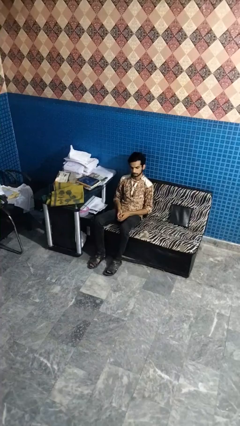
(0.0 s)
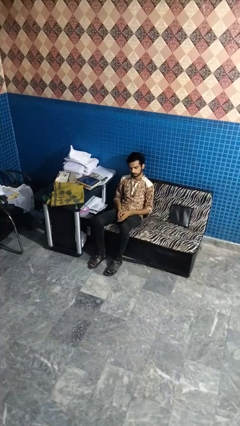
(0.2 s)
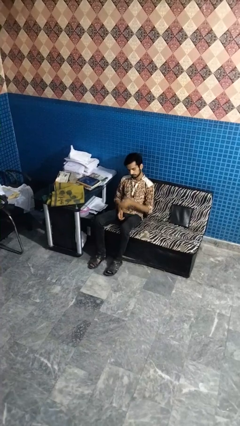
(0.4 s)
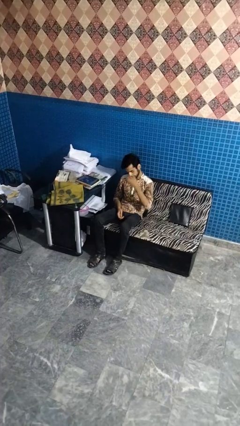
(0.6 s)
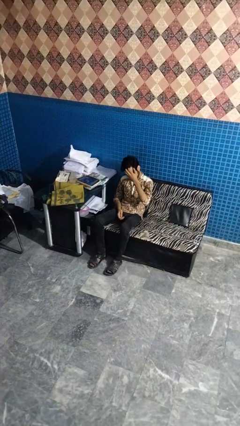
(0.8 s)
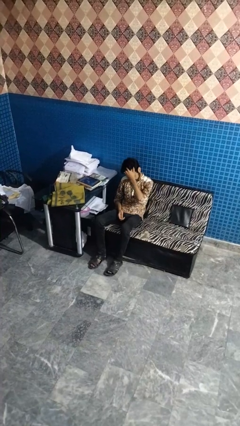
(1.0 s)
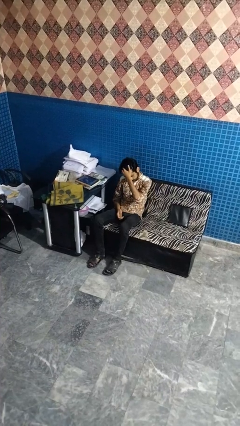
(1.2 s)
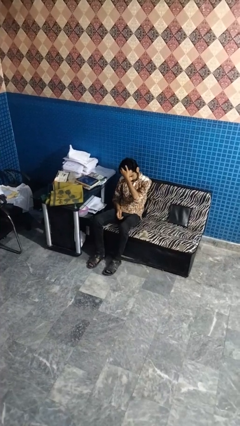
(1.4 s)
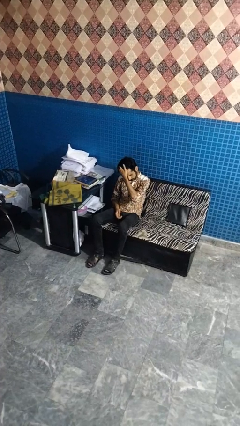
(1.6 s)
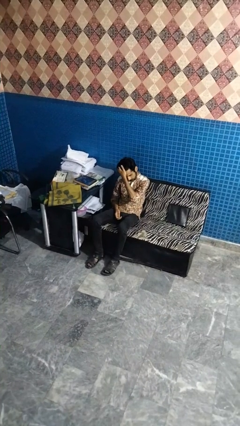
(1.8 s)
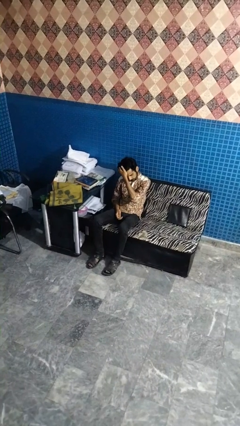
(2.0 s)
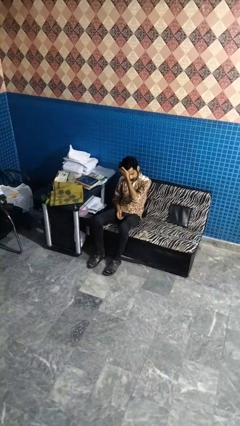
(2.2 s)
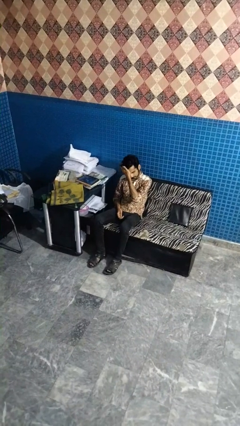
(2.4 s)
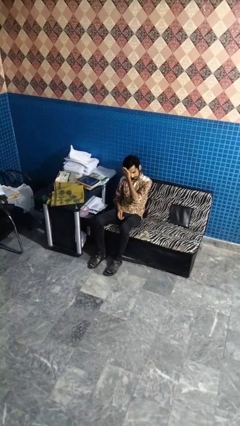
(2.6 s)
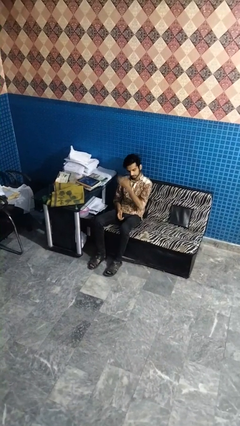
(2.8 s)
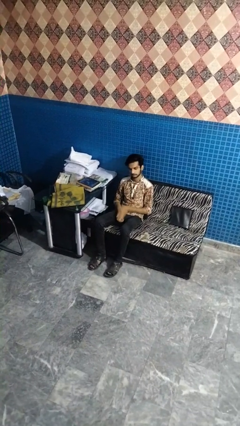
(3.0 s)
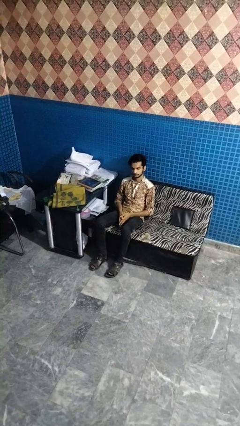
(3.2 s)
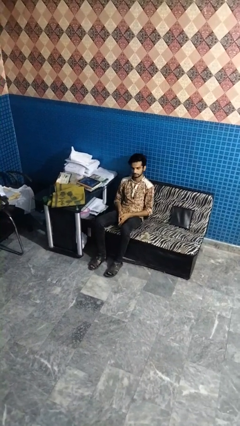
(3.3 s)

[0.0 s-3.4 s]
person strokes hair

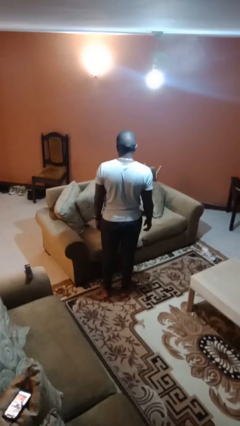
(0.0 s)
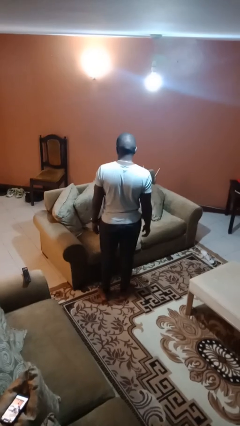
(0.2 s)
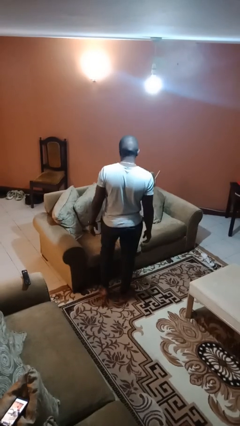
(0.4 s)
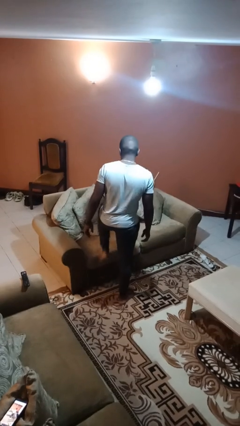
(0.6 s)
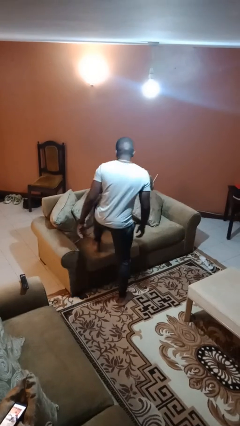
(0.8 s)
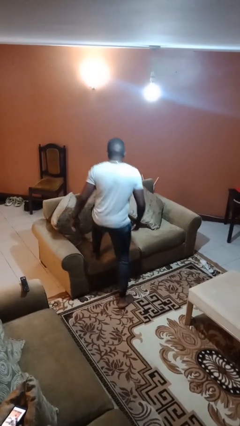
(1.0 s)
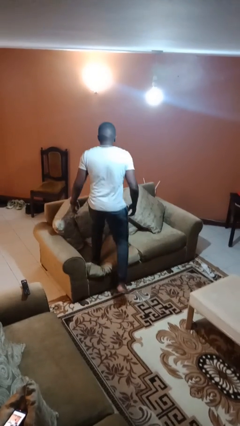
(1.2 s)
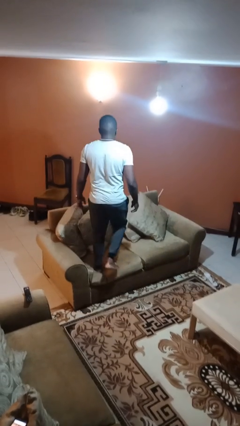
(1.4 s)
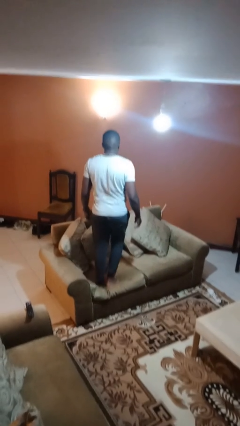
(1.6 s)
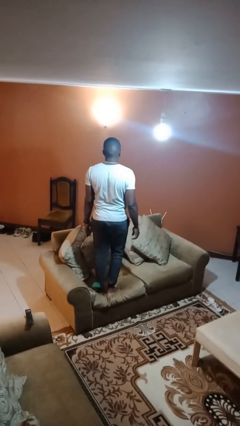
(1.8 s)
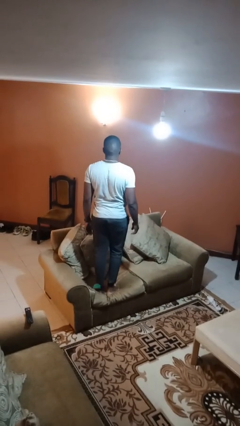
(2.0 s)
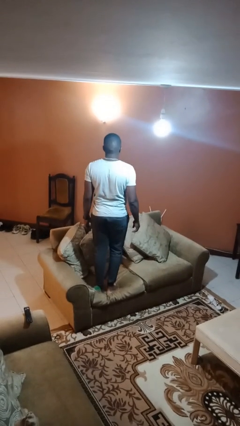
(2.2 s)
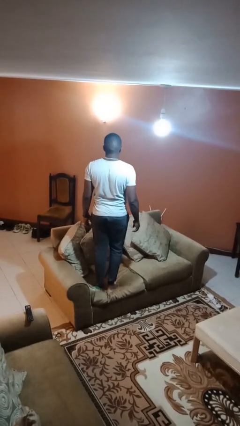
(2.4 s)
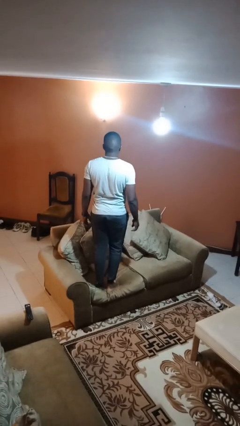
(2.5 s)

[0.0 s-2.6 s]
person climbs on couch

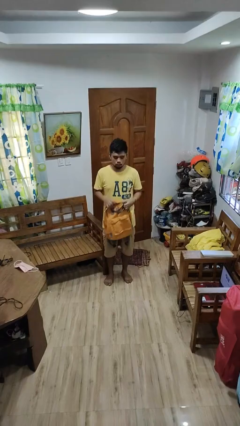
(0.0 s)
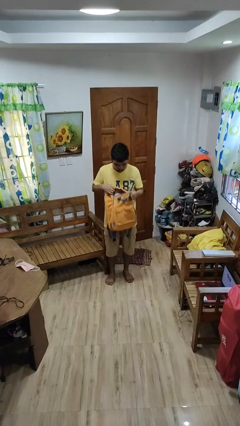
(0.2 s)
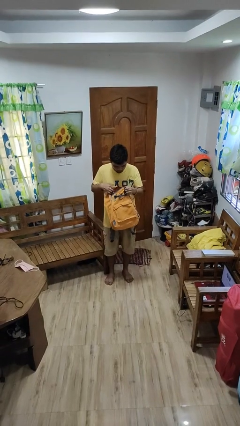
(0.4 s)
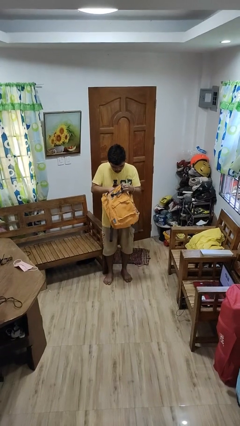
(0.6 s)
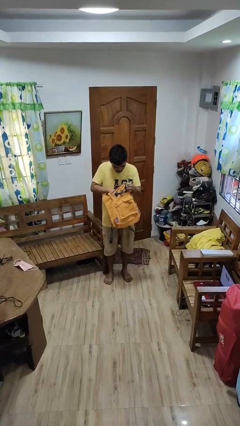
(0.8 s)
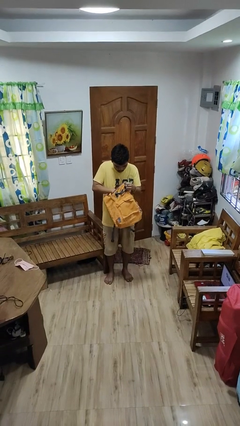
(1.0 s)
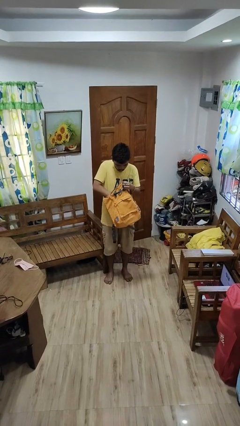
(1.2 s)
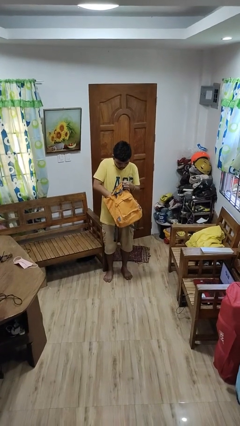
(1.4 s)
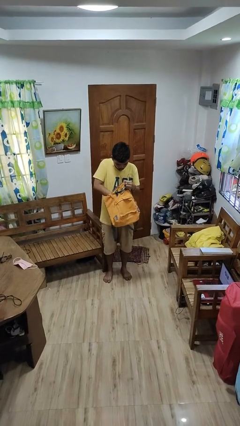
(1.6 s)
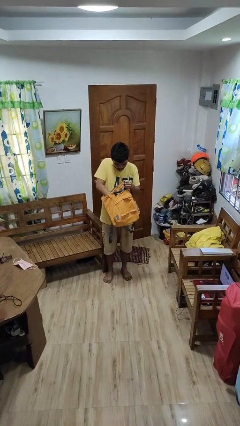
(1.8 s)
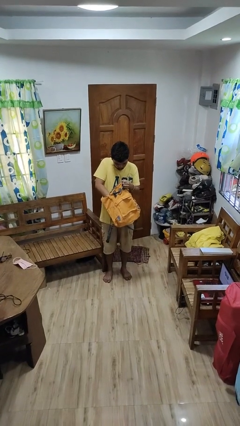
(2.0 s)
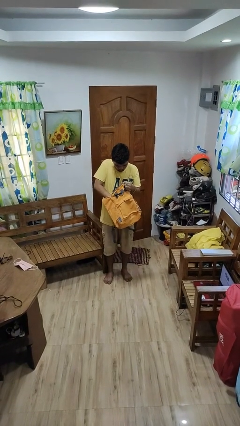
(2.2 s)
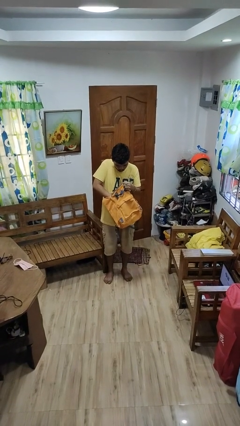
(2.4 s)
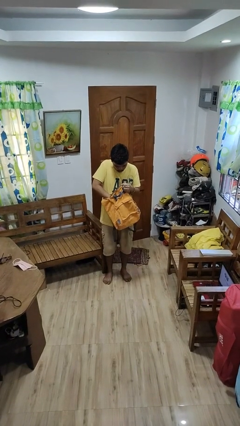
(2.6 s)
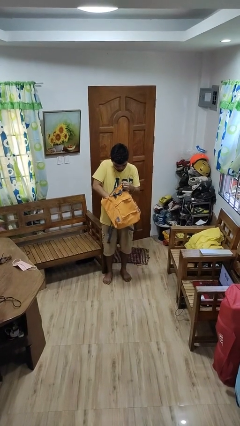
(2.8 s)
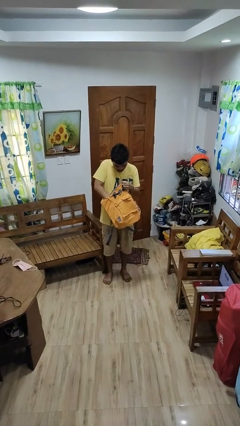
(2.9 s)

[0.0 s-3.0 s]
person searches in backpack

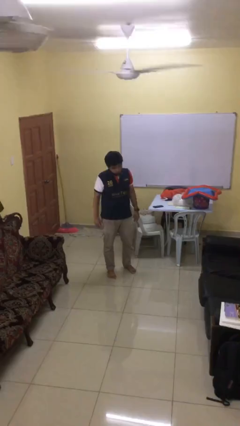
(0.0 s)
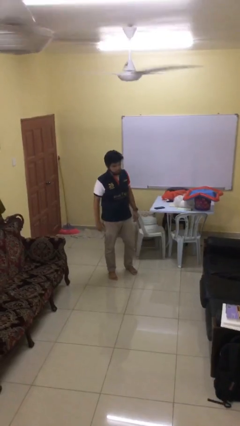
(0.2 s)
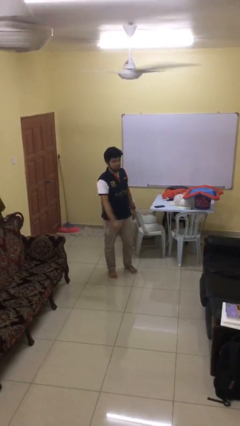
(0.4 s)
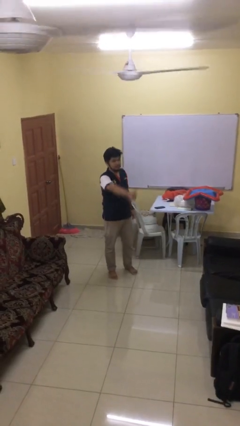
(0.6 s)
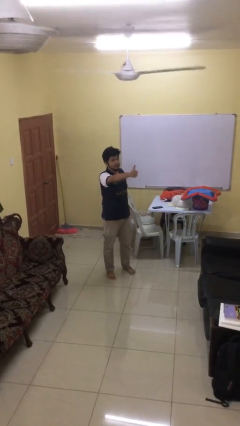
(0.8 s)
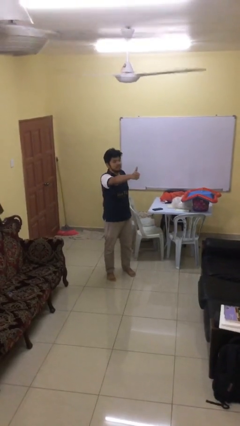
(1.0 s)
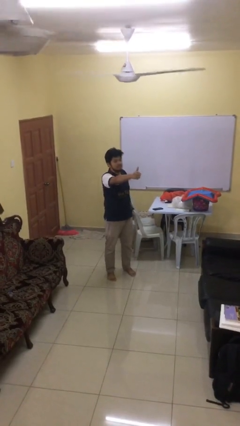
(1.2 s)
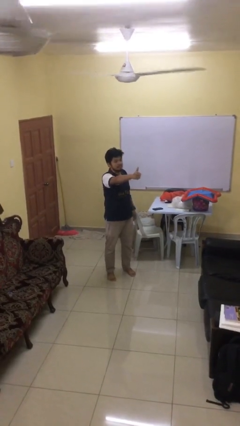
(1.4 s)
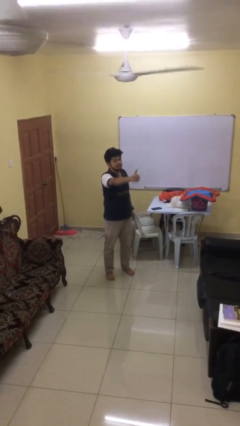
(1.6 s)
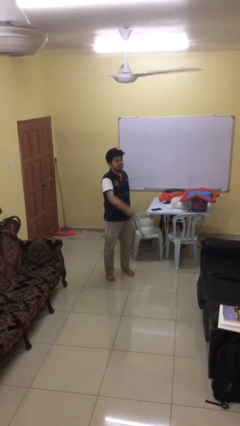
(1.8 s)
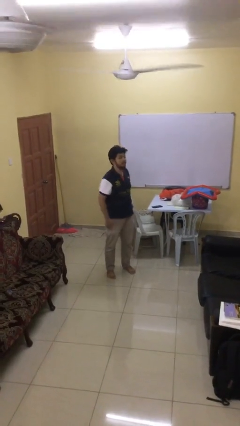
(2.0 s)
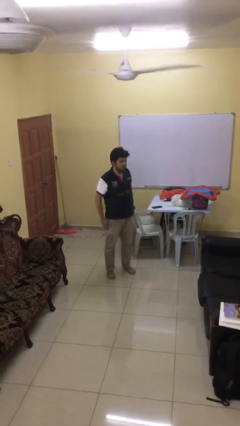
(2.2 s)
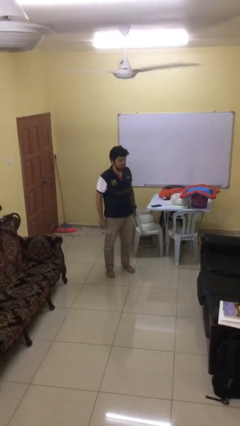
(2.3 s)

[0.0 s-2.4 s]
person gestures thumbs up

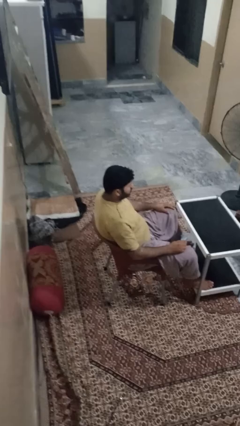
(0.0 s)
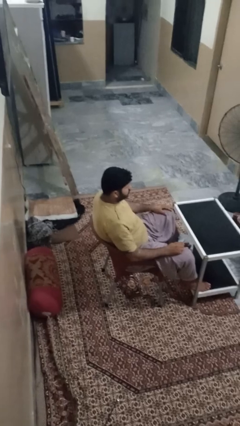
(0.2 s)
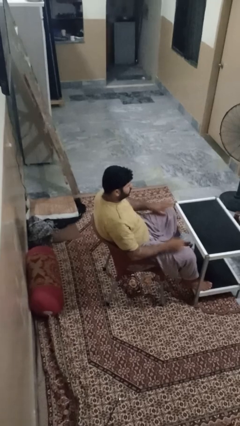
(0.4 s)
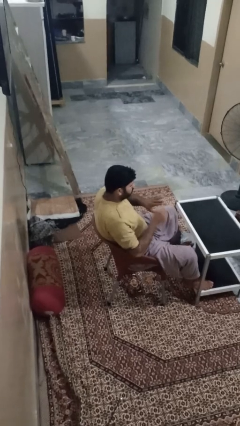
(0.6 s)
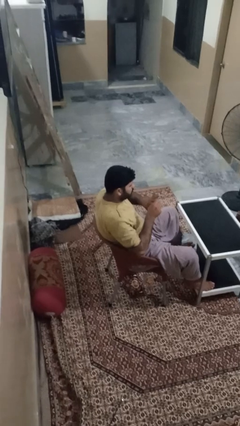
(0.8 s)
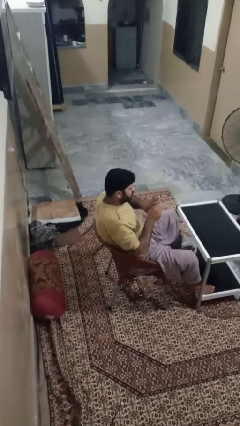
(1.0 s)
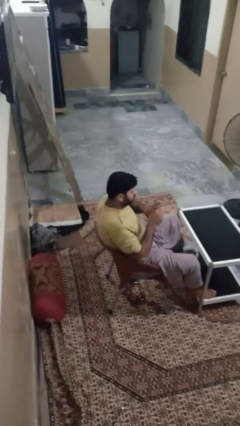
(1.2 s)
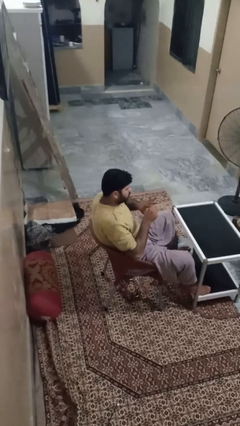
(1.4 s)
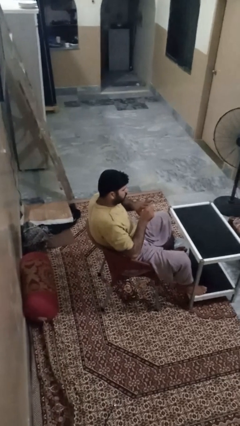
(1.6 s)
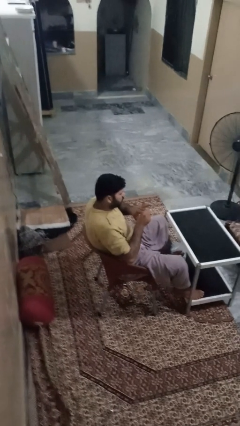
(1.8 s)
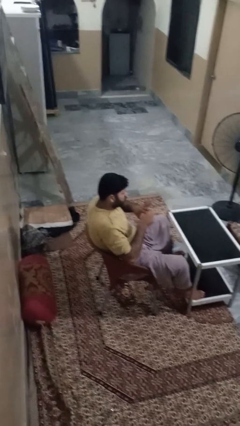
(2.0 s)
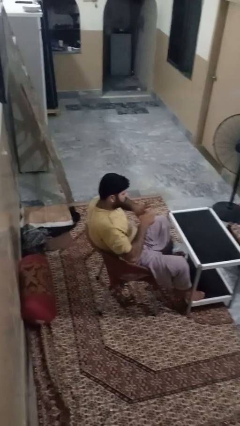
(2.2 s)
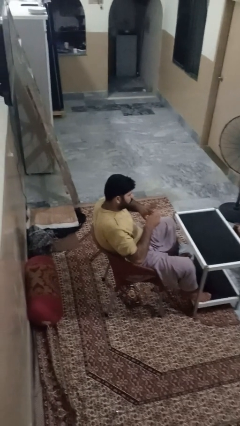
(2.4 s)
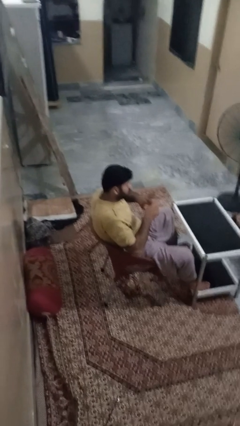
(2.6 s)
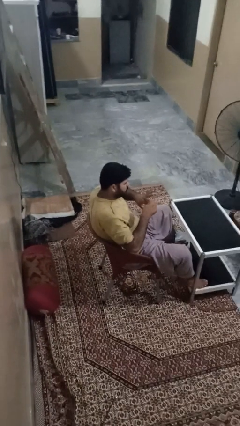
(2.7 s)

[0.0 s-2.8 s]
person files fingernails

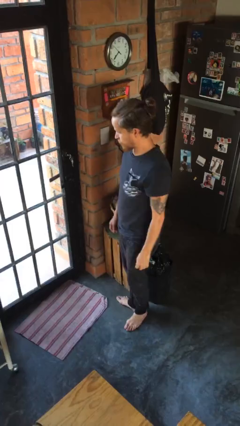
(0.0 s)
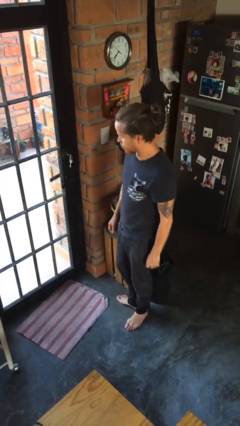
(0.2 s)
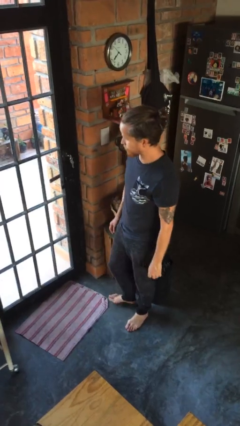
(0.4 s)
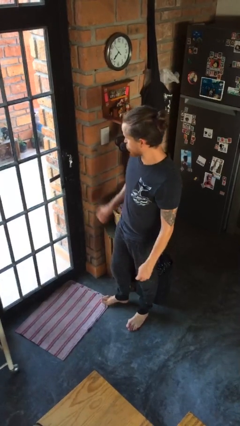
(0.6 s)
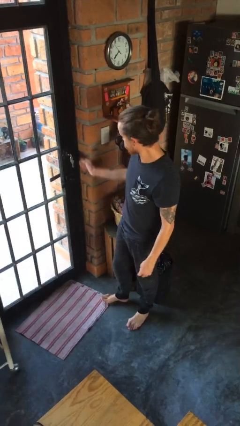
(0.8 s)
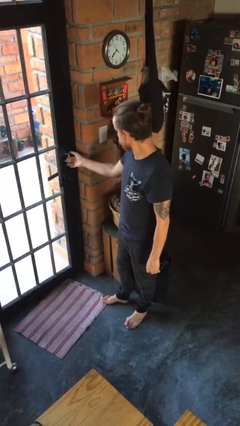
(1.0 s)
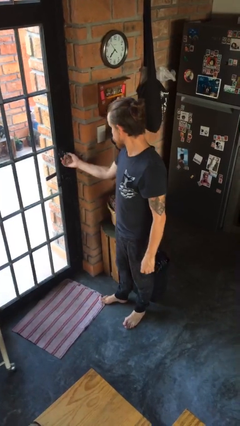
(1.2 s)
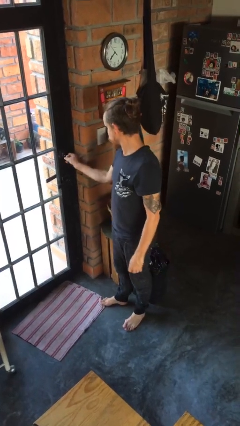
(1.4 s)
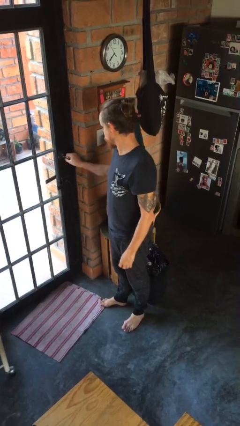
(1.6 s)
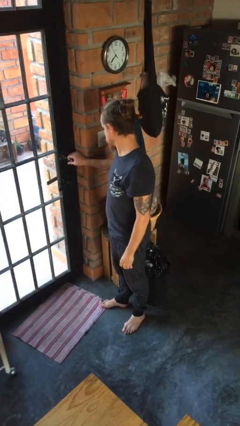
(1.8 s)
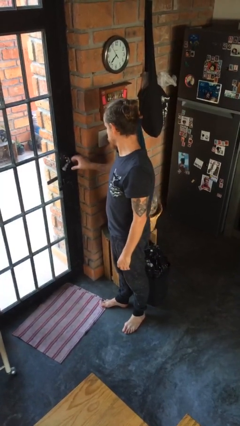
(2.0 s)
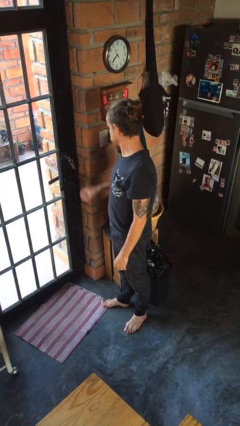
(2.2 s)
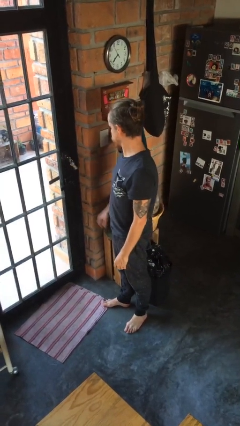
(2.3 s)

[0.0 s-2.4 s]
person unlocks door with keys

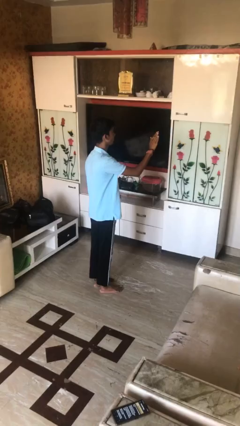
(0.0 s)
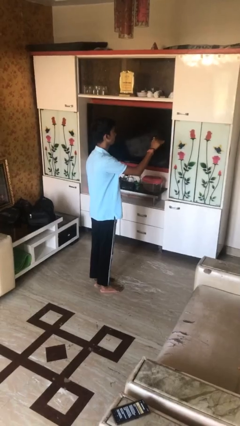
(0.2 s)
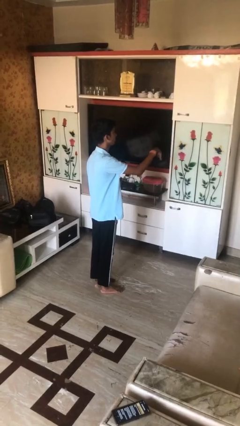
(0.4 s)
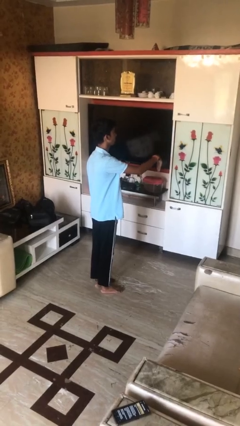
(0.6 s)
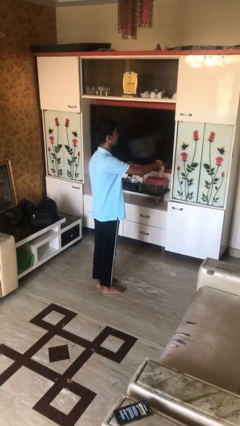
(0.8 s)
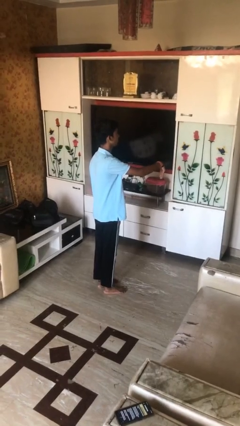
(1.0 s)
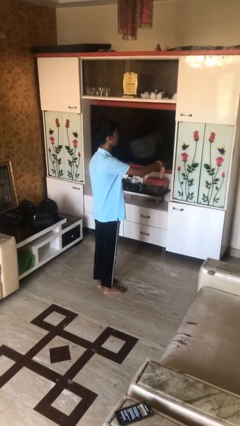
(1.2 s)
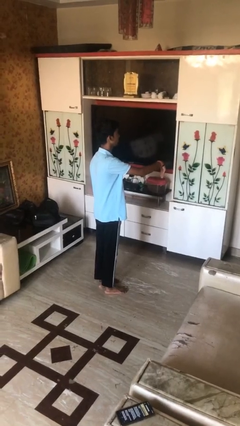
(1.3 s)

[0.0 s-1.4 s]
person gestures swipe down
